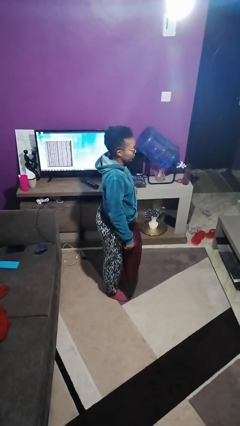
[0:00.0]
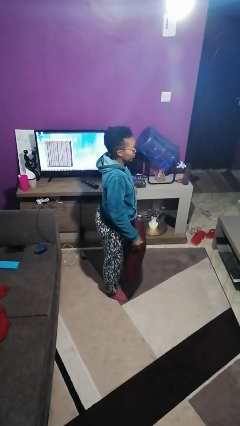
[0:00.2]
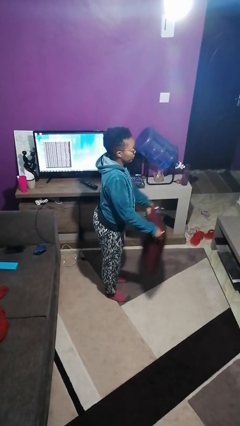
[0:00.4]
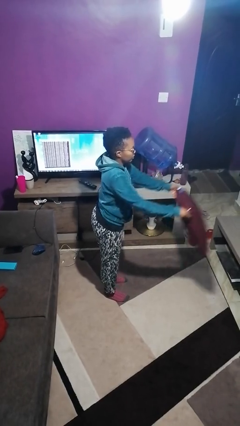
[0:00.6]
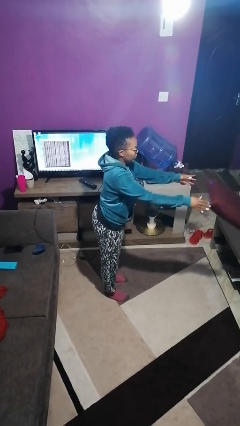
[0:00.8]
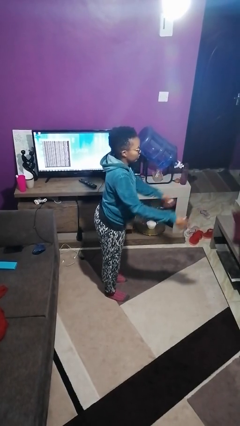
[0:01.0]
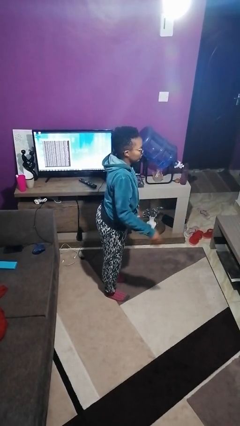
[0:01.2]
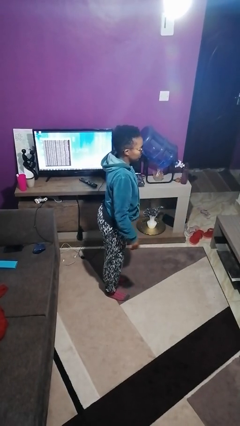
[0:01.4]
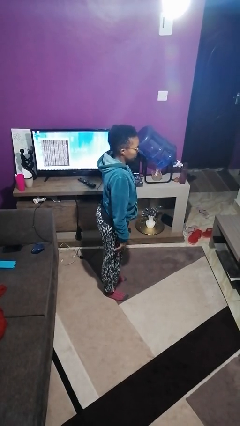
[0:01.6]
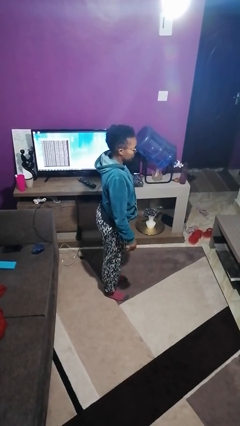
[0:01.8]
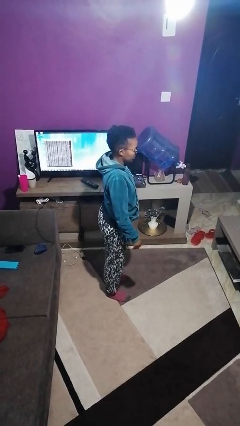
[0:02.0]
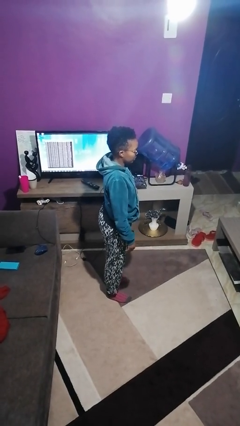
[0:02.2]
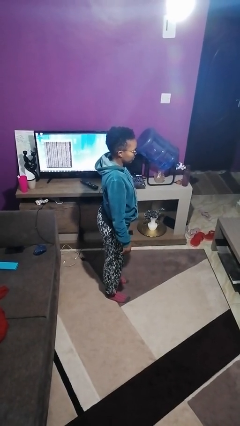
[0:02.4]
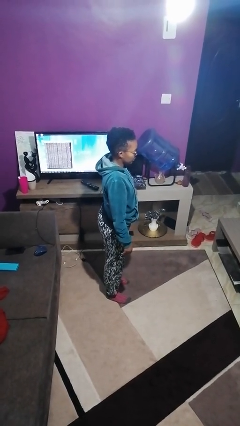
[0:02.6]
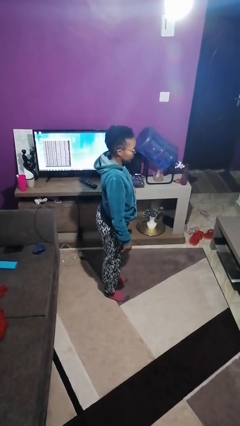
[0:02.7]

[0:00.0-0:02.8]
person throws object on table

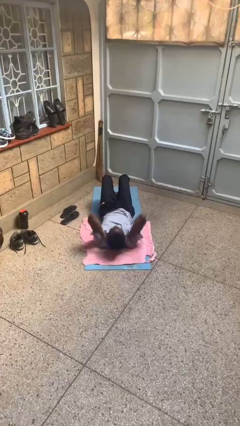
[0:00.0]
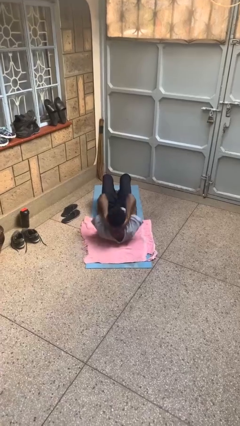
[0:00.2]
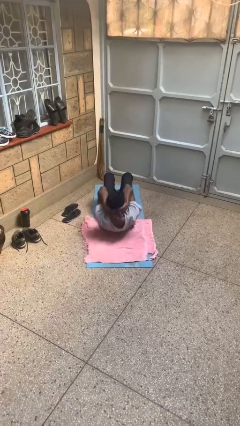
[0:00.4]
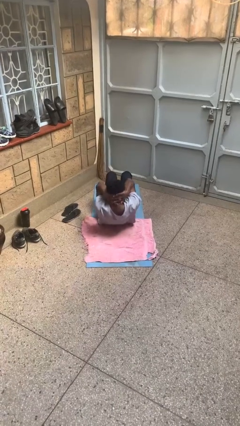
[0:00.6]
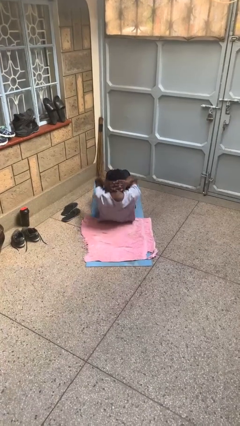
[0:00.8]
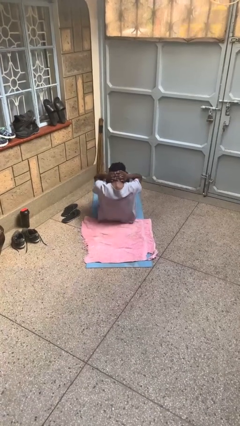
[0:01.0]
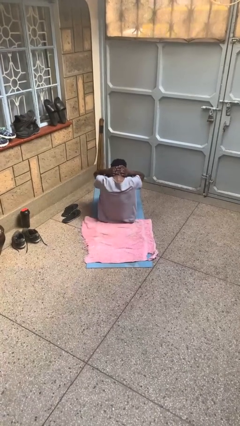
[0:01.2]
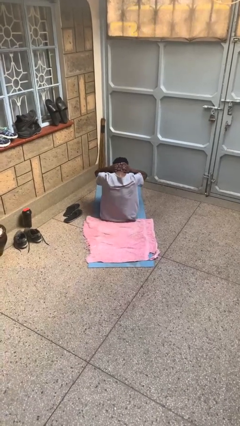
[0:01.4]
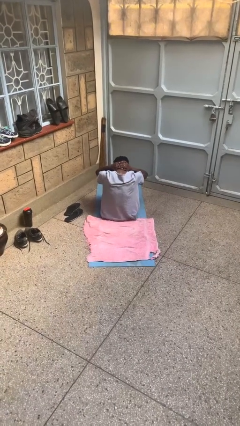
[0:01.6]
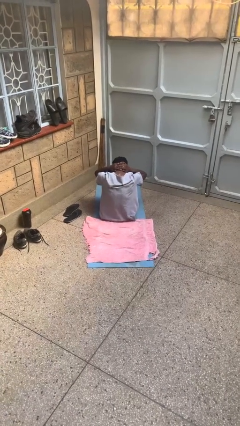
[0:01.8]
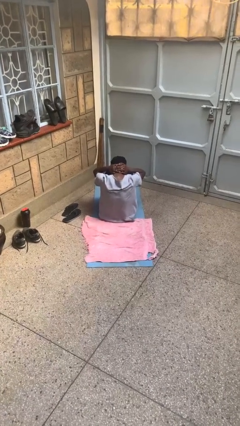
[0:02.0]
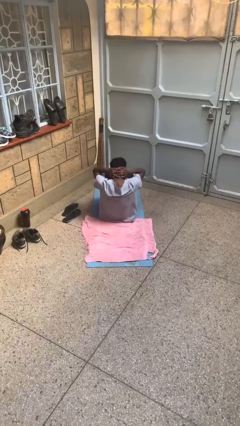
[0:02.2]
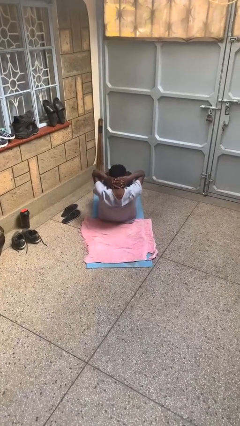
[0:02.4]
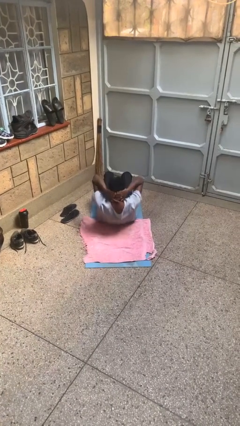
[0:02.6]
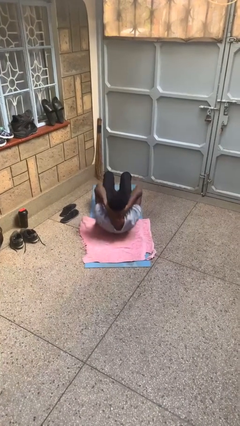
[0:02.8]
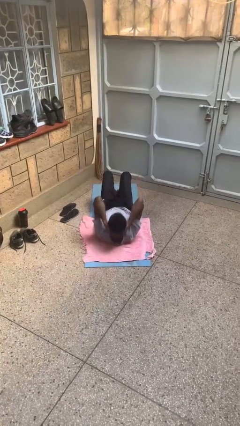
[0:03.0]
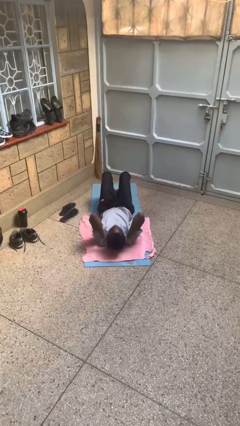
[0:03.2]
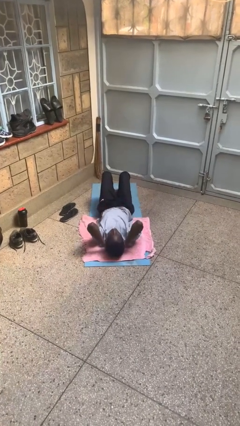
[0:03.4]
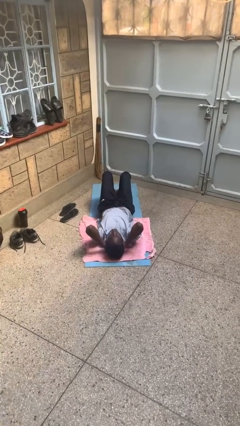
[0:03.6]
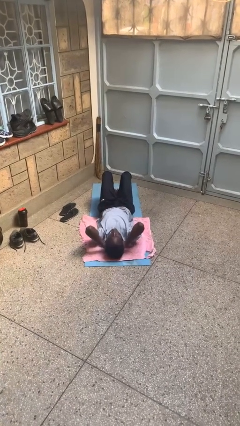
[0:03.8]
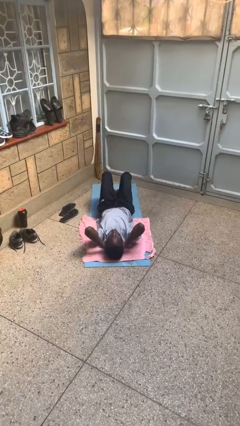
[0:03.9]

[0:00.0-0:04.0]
person exercises with situp

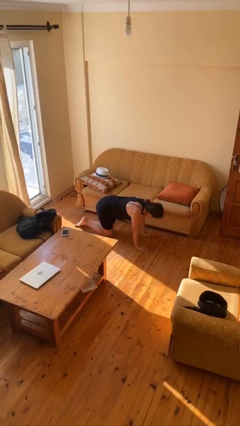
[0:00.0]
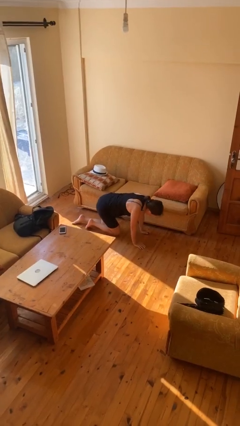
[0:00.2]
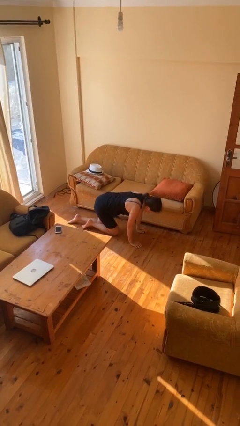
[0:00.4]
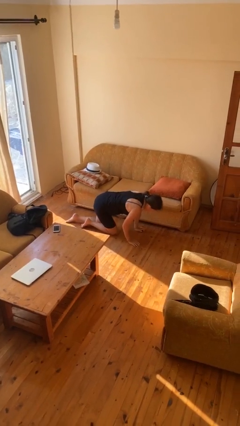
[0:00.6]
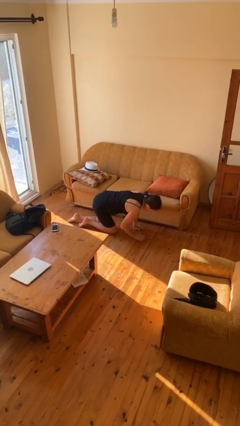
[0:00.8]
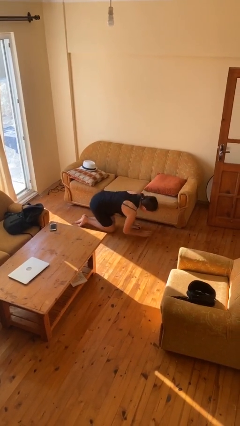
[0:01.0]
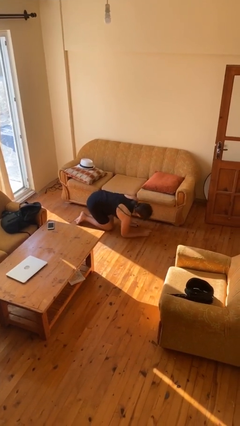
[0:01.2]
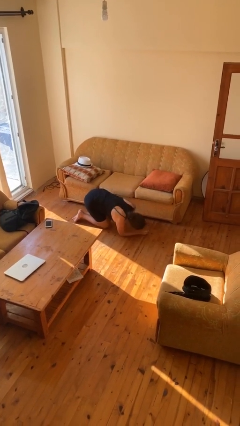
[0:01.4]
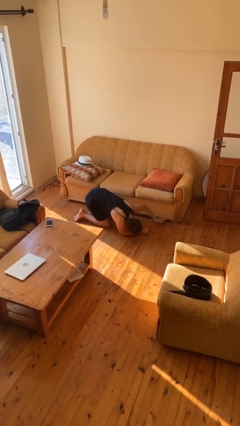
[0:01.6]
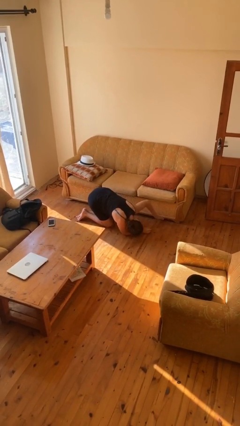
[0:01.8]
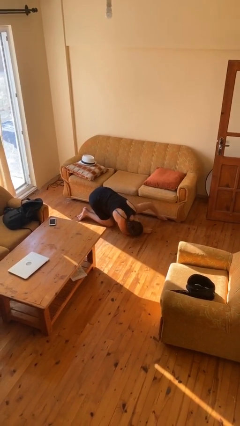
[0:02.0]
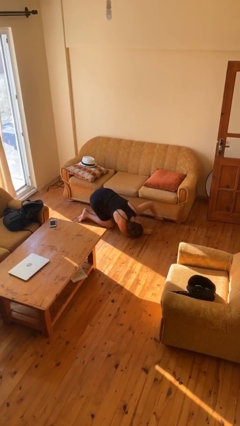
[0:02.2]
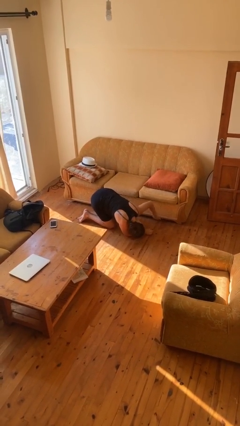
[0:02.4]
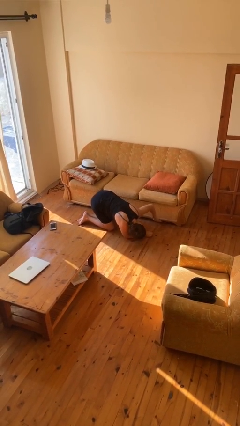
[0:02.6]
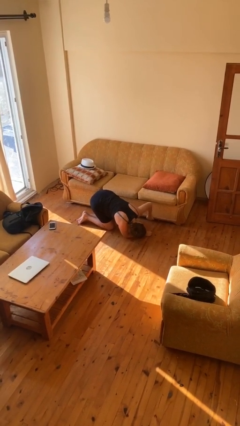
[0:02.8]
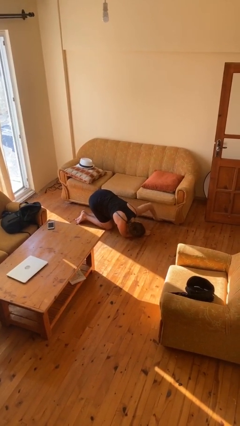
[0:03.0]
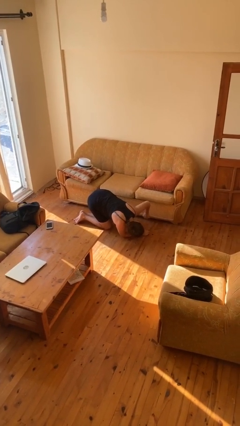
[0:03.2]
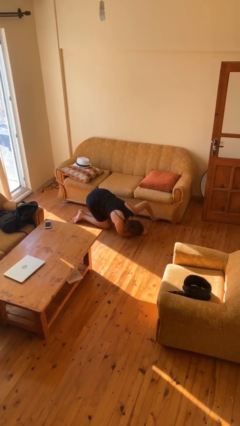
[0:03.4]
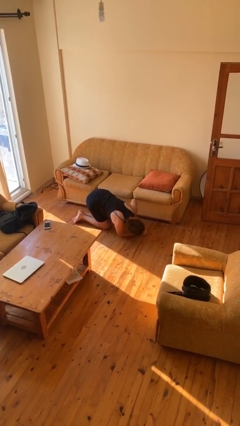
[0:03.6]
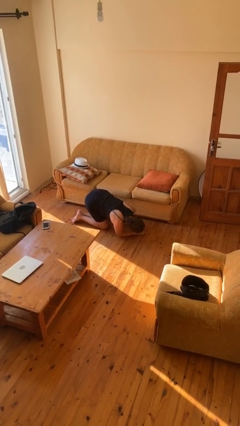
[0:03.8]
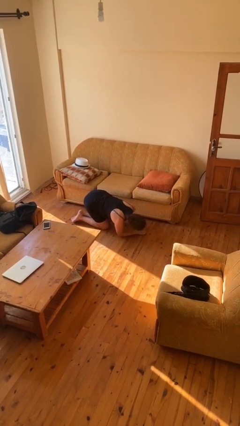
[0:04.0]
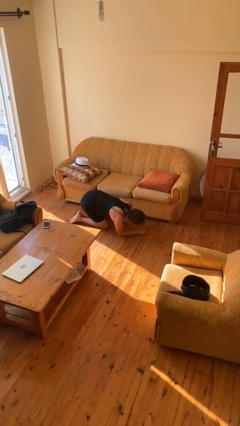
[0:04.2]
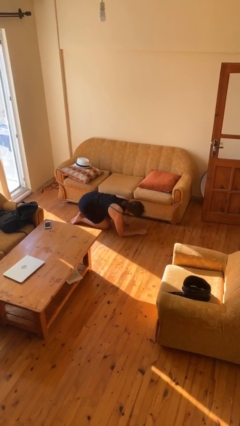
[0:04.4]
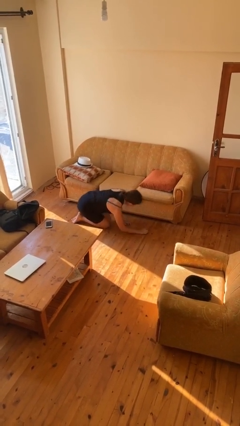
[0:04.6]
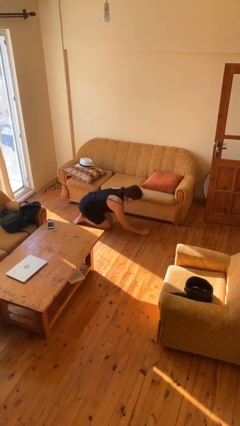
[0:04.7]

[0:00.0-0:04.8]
person searches under couch

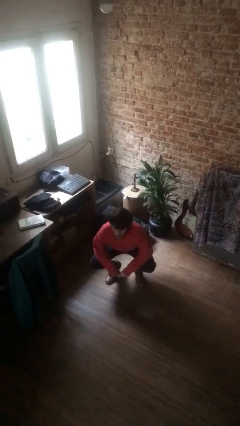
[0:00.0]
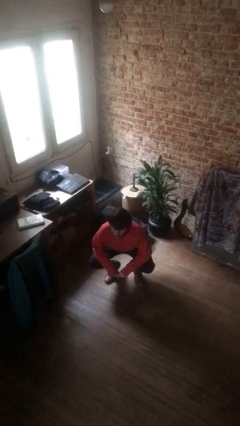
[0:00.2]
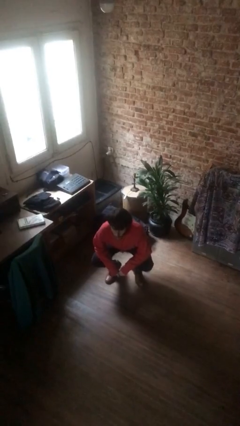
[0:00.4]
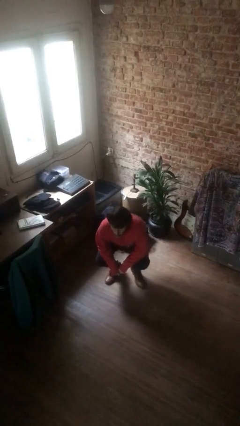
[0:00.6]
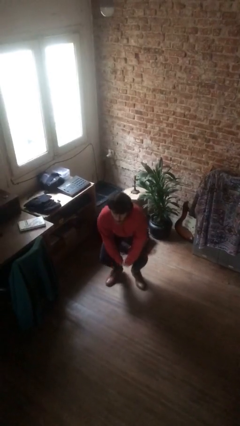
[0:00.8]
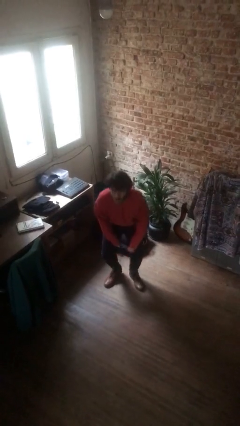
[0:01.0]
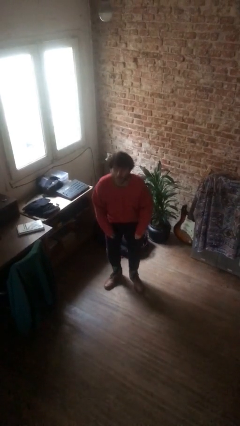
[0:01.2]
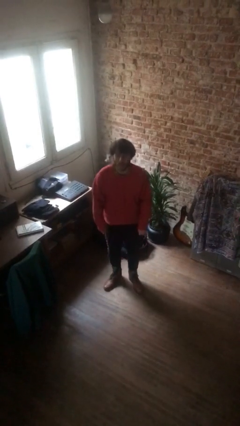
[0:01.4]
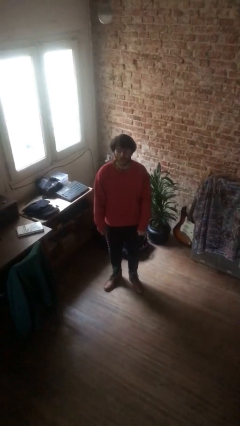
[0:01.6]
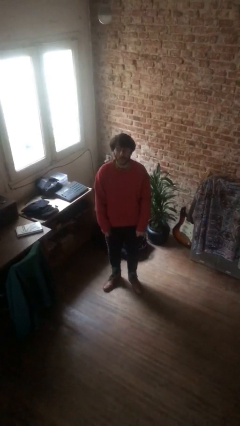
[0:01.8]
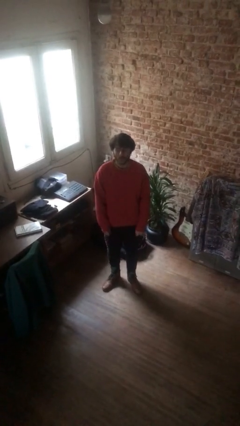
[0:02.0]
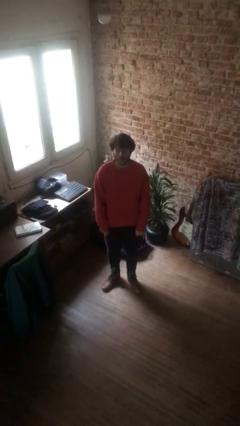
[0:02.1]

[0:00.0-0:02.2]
person stands up

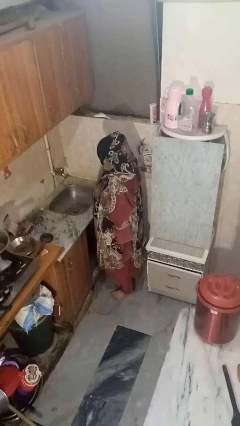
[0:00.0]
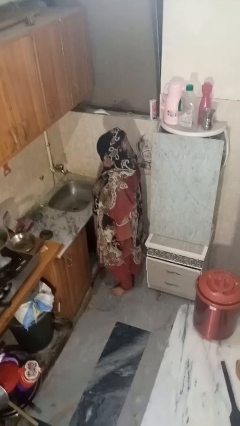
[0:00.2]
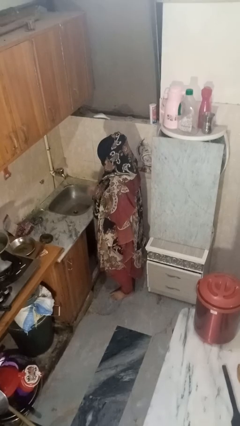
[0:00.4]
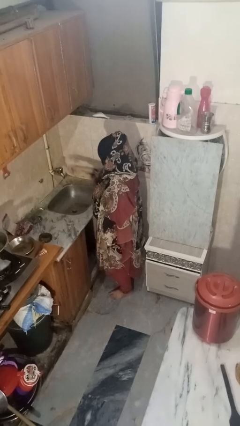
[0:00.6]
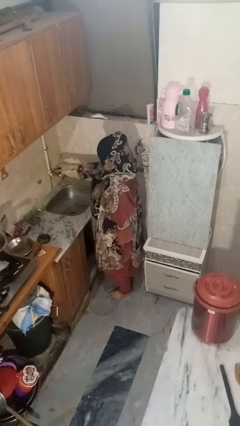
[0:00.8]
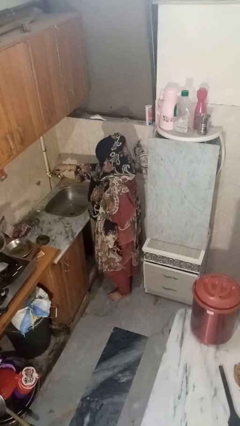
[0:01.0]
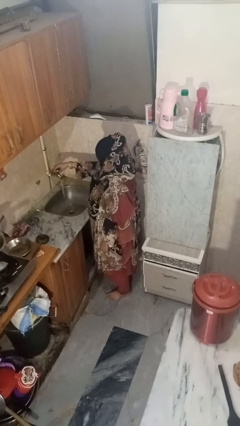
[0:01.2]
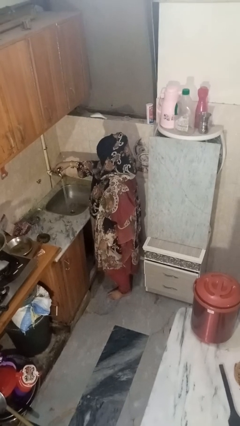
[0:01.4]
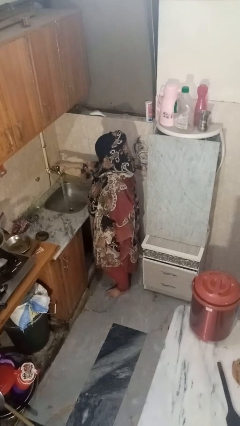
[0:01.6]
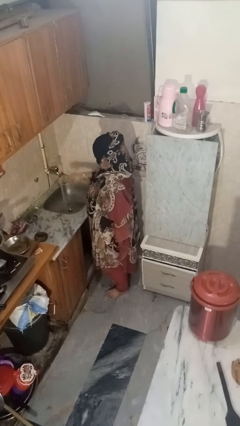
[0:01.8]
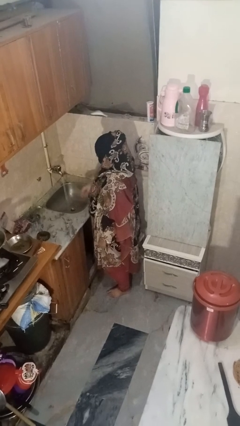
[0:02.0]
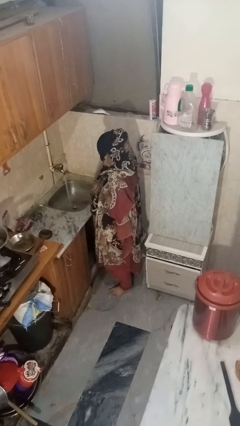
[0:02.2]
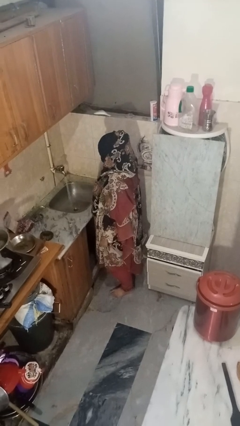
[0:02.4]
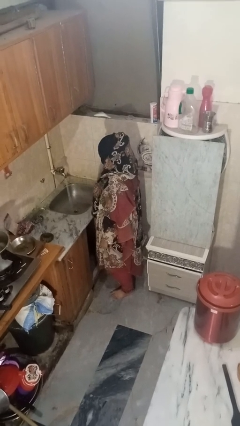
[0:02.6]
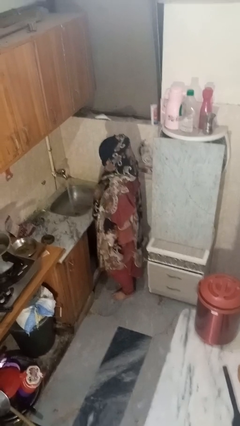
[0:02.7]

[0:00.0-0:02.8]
person turns on faucet

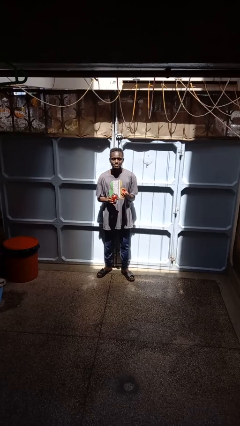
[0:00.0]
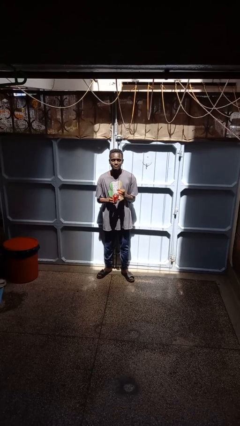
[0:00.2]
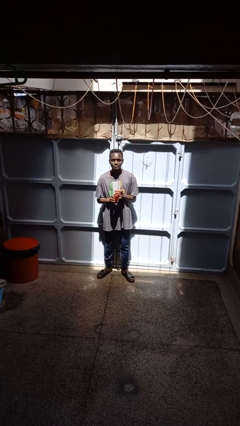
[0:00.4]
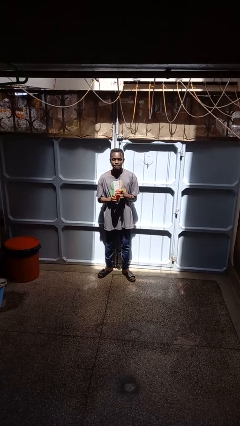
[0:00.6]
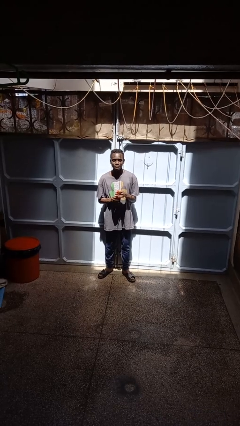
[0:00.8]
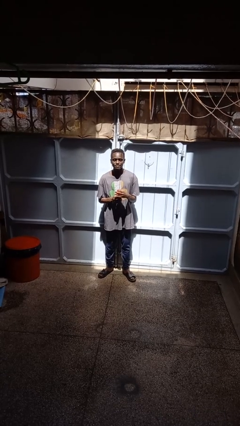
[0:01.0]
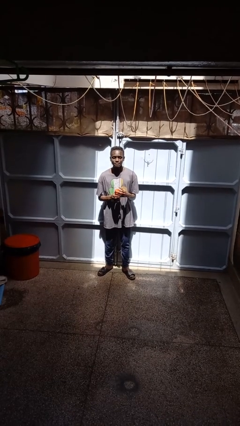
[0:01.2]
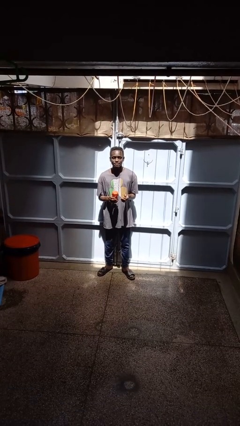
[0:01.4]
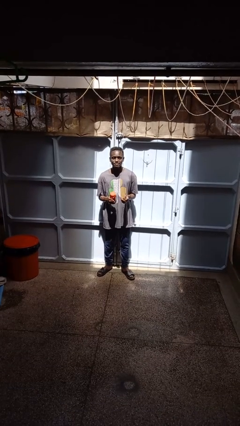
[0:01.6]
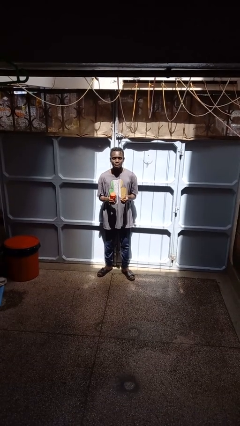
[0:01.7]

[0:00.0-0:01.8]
person closes jar
